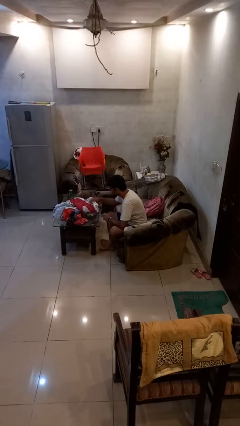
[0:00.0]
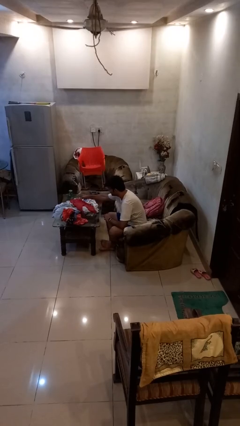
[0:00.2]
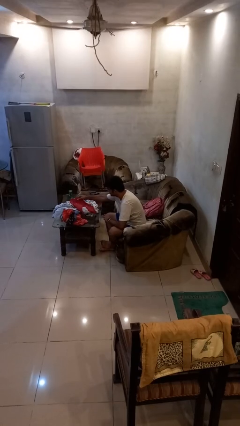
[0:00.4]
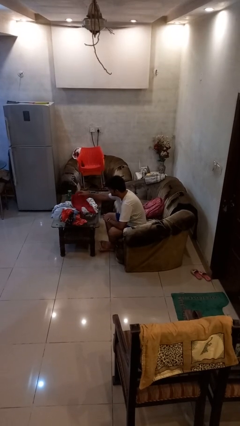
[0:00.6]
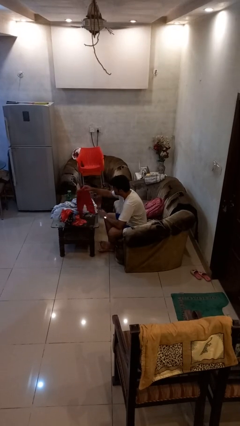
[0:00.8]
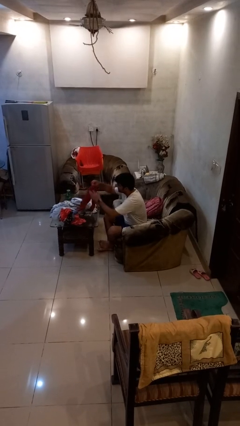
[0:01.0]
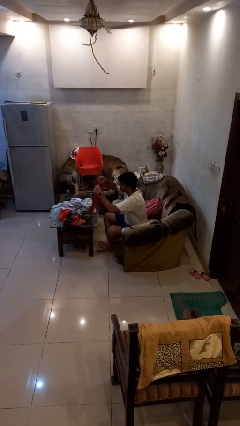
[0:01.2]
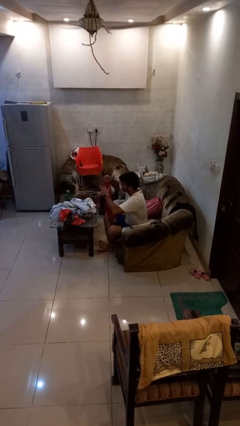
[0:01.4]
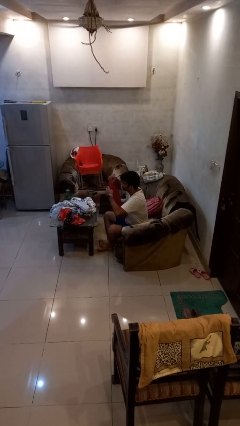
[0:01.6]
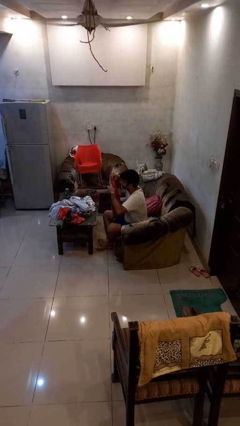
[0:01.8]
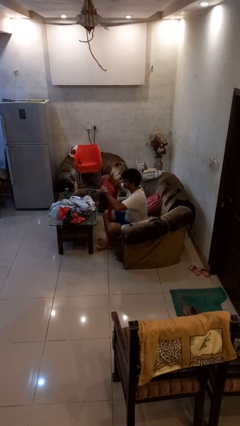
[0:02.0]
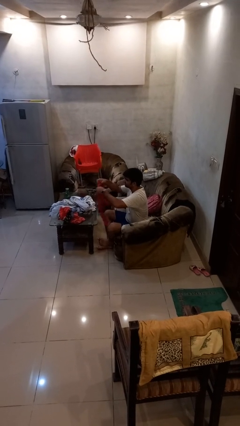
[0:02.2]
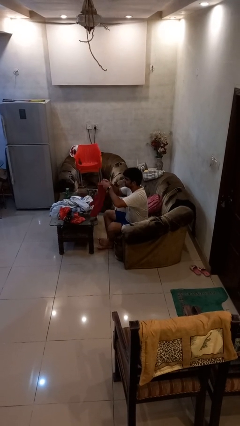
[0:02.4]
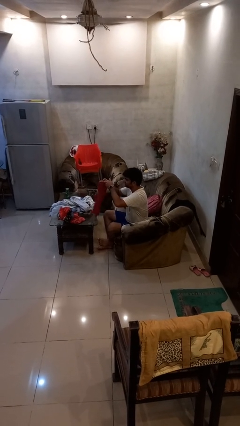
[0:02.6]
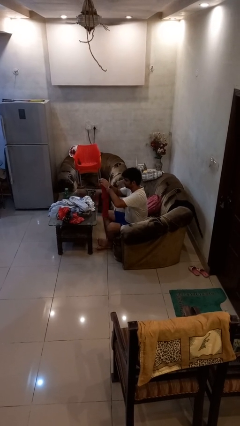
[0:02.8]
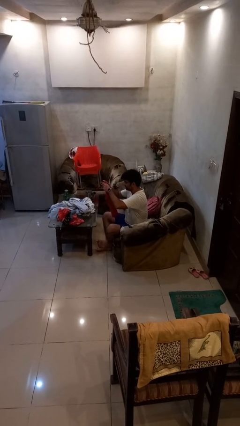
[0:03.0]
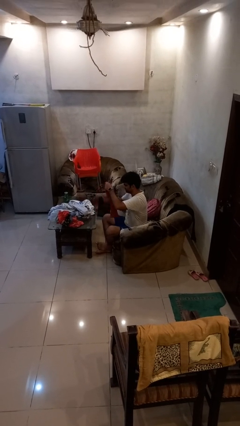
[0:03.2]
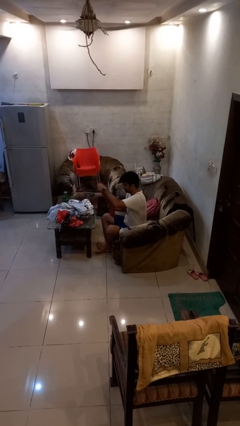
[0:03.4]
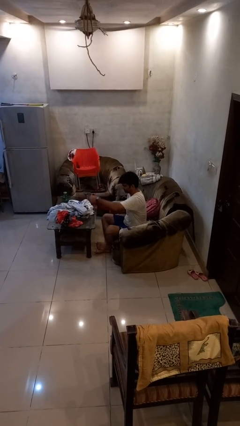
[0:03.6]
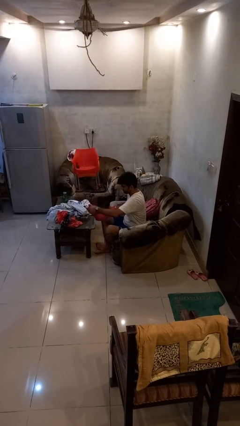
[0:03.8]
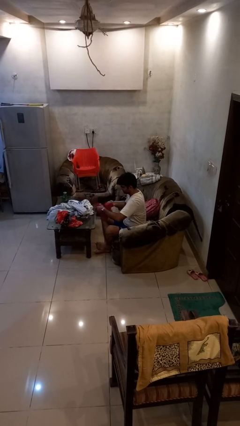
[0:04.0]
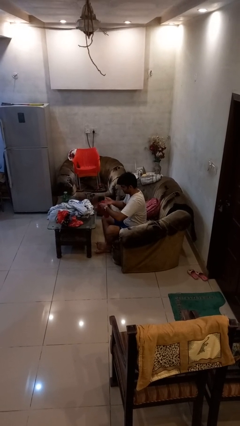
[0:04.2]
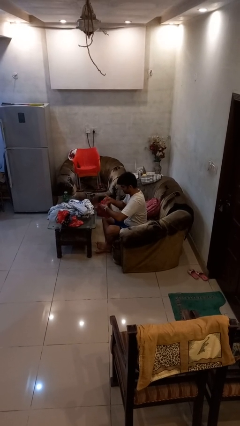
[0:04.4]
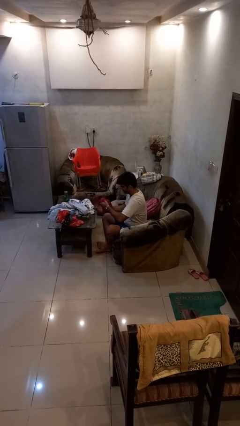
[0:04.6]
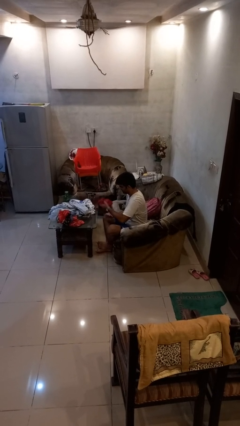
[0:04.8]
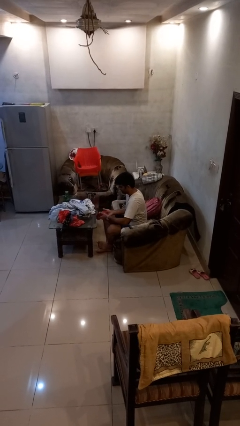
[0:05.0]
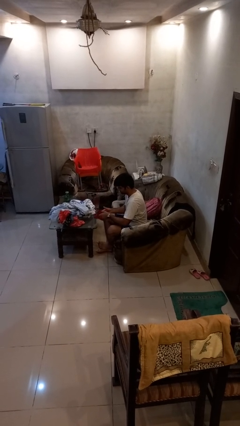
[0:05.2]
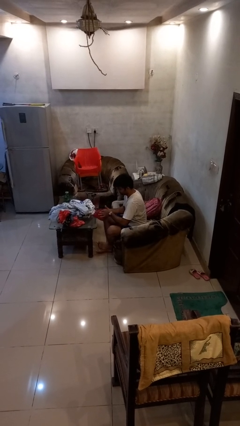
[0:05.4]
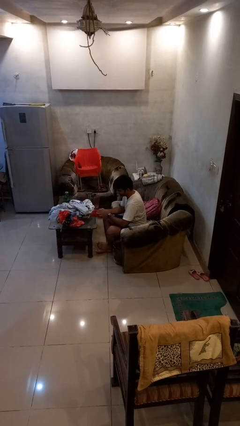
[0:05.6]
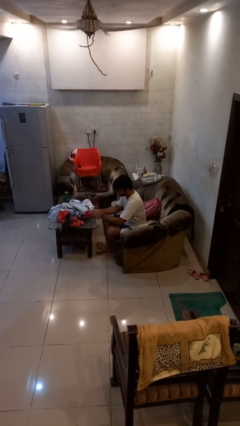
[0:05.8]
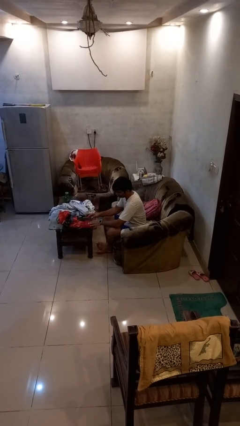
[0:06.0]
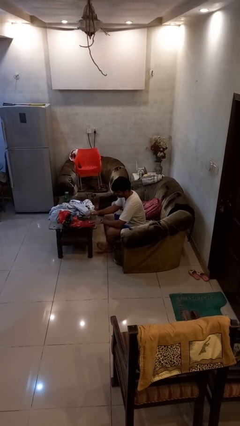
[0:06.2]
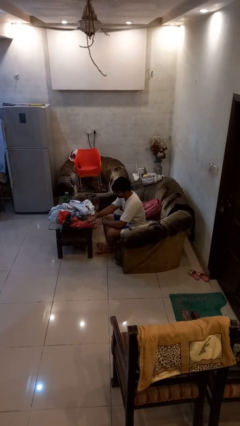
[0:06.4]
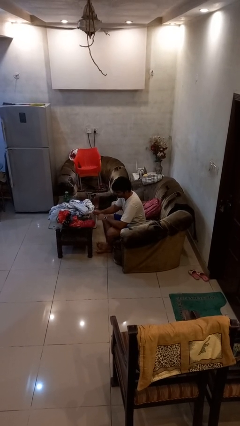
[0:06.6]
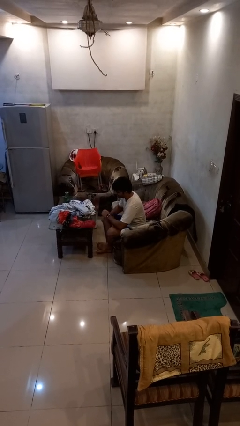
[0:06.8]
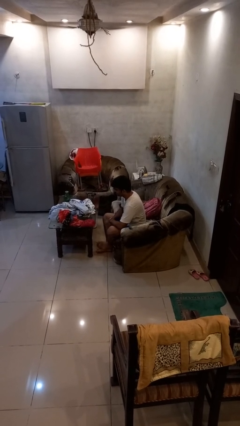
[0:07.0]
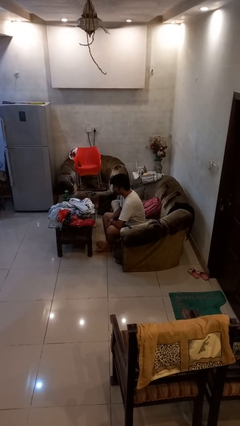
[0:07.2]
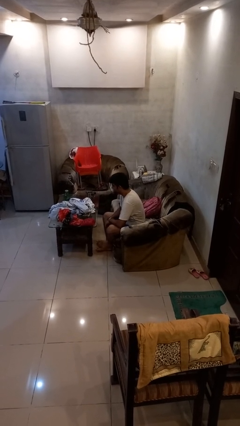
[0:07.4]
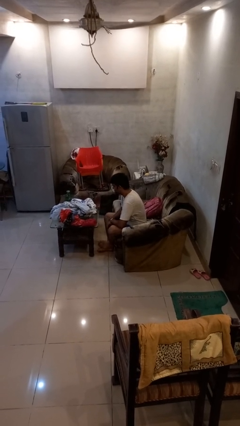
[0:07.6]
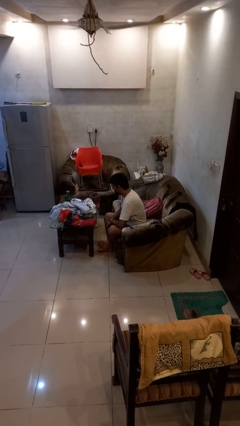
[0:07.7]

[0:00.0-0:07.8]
person folds pants

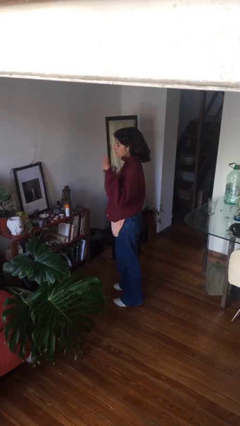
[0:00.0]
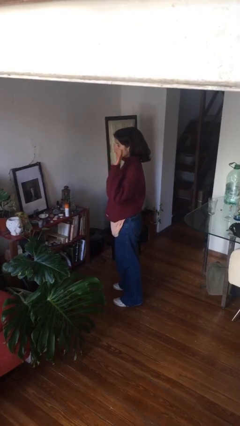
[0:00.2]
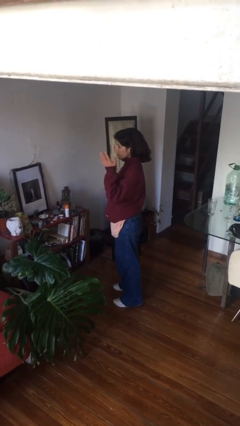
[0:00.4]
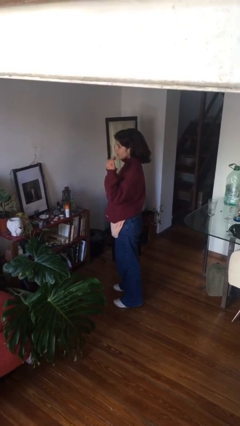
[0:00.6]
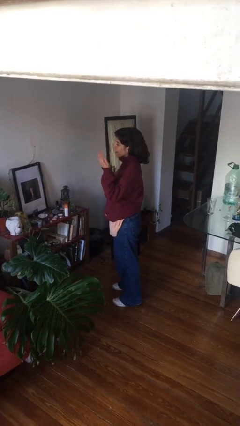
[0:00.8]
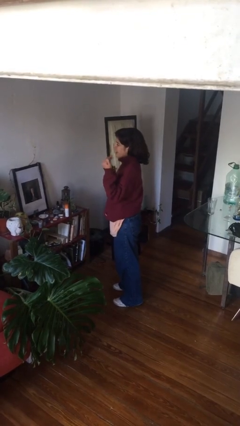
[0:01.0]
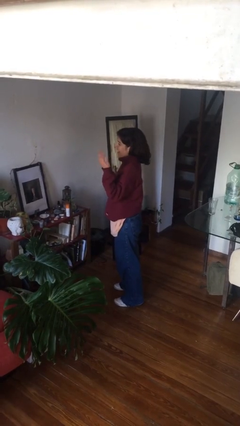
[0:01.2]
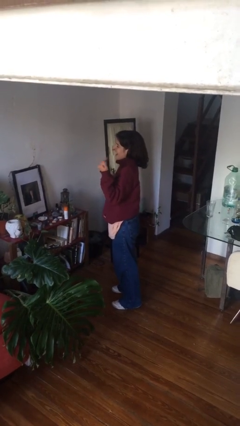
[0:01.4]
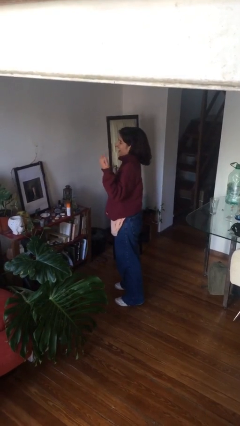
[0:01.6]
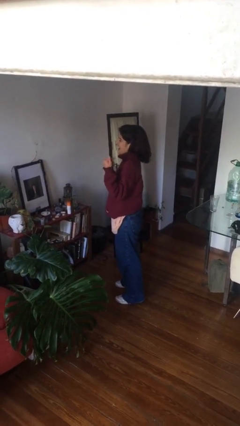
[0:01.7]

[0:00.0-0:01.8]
person gestures come here

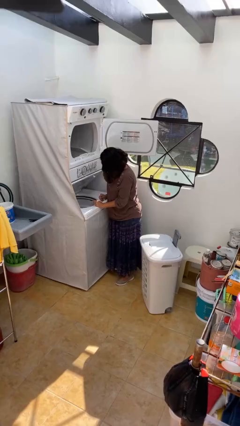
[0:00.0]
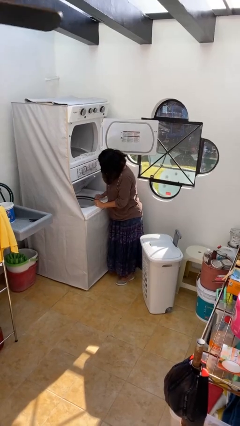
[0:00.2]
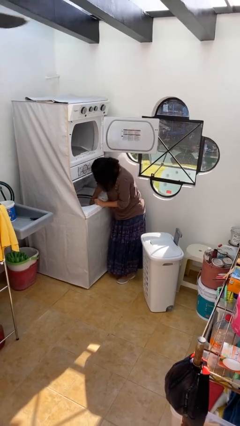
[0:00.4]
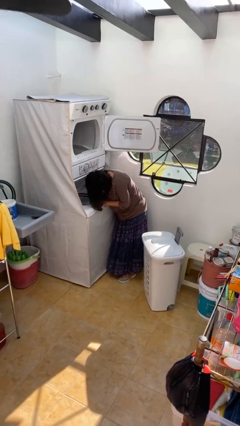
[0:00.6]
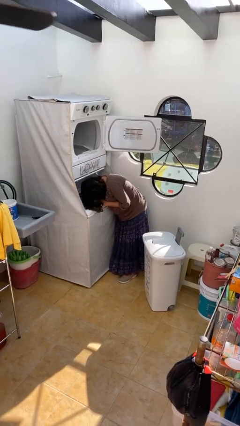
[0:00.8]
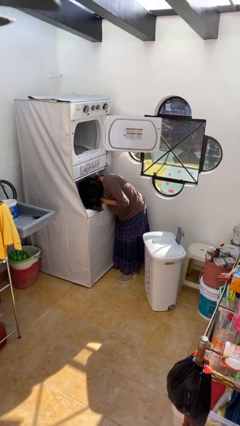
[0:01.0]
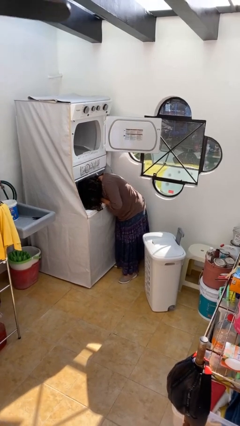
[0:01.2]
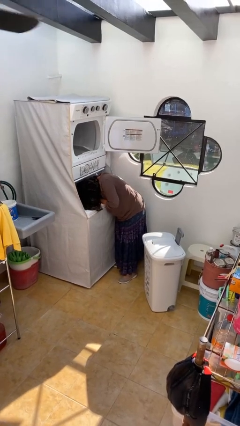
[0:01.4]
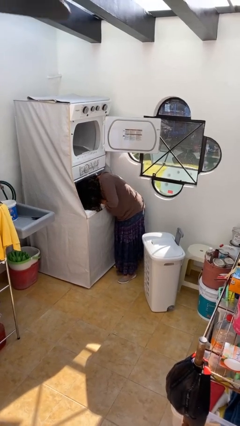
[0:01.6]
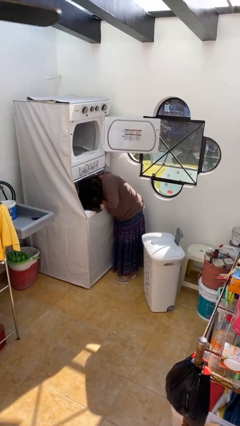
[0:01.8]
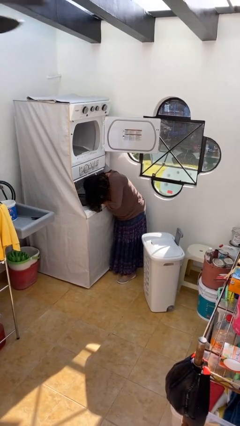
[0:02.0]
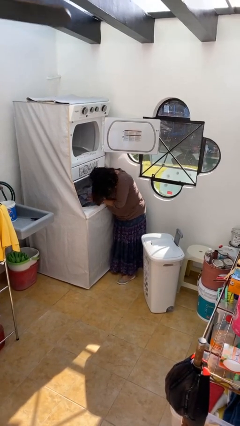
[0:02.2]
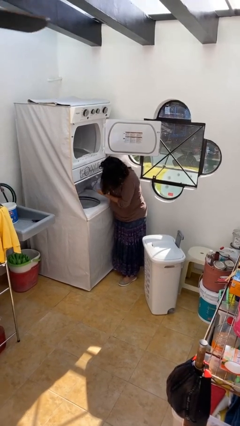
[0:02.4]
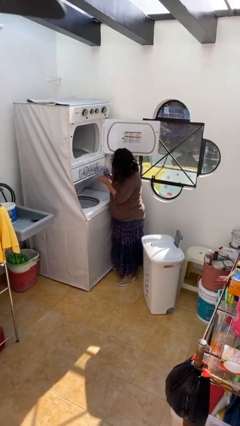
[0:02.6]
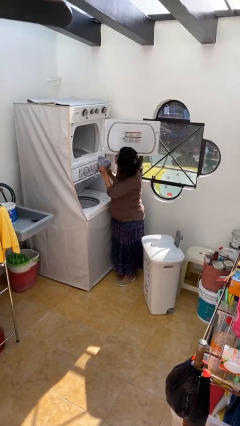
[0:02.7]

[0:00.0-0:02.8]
person unloads clotheswasher

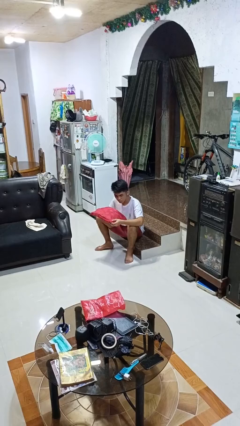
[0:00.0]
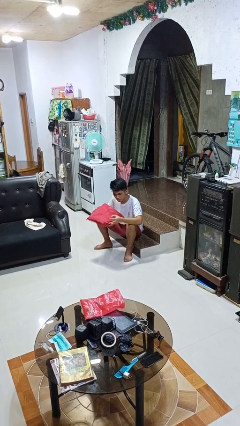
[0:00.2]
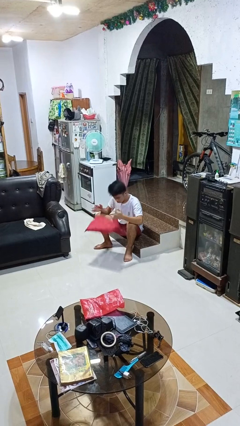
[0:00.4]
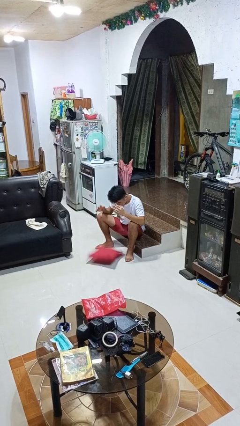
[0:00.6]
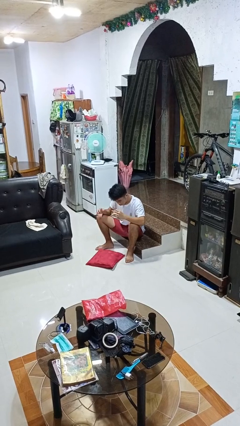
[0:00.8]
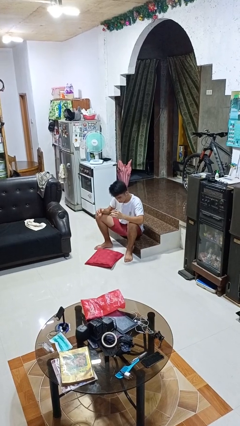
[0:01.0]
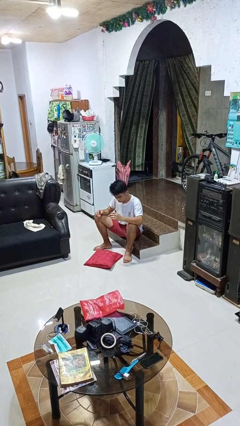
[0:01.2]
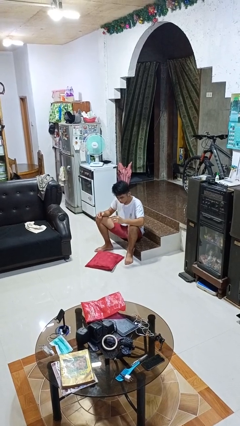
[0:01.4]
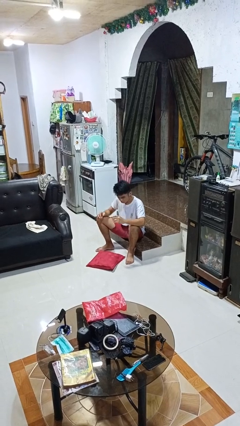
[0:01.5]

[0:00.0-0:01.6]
person drops object

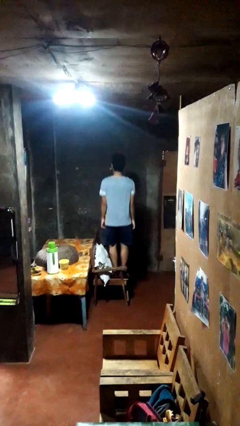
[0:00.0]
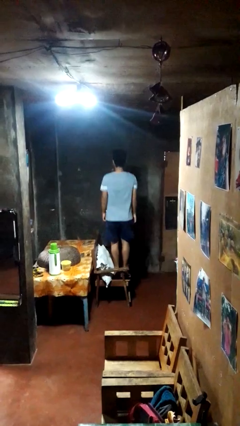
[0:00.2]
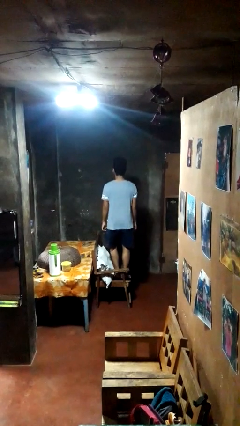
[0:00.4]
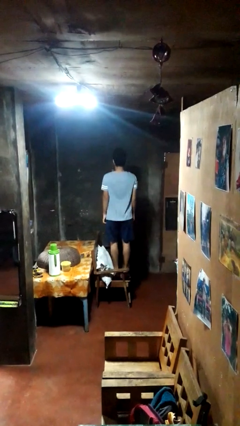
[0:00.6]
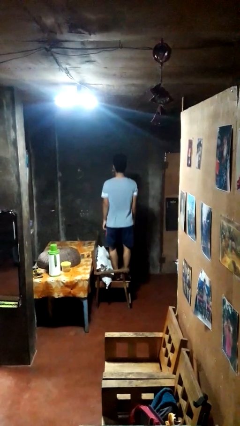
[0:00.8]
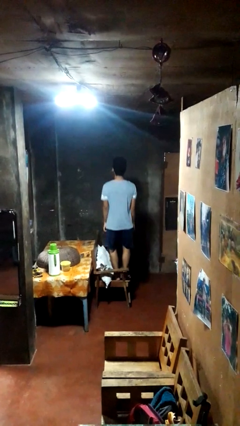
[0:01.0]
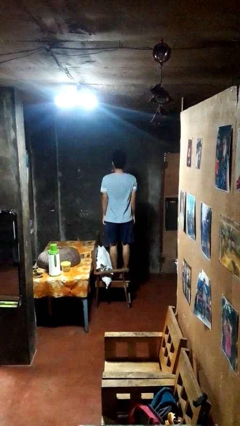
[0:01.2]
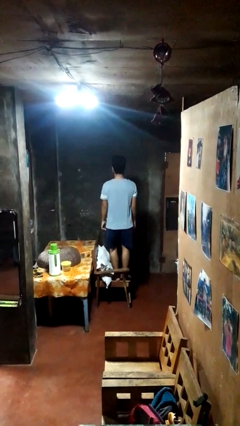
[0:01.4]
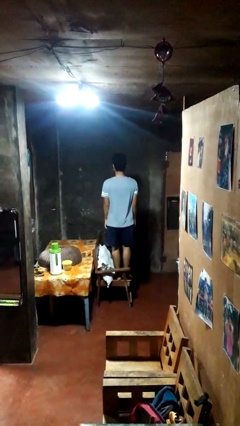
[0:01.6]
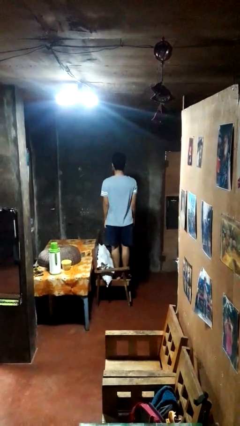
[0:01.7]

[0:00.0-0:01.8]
person jumps on couch

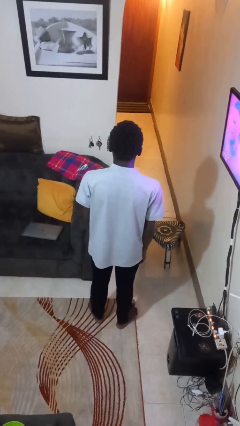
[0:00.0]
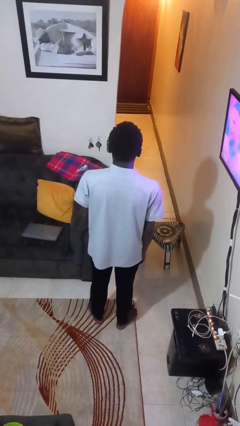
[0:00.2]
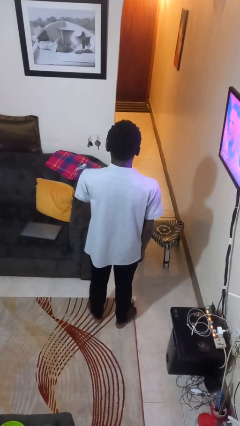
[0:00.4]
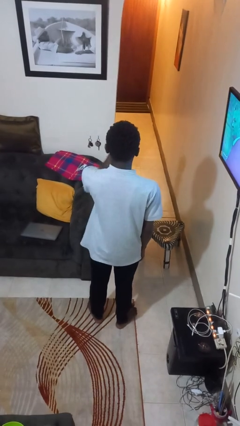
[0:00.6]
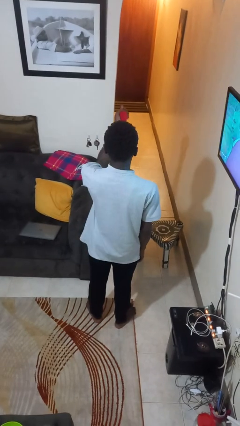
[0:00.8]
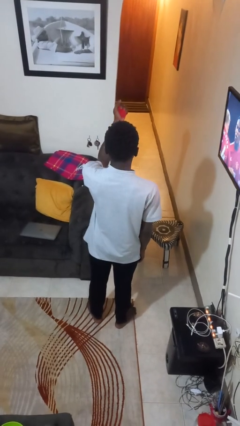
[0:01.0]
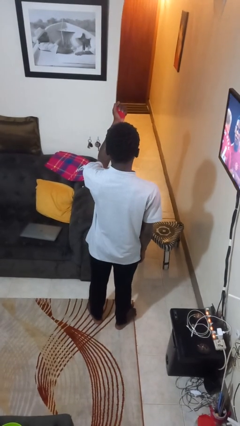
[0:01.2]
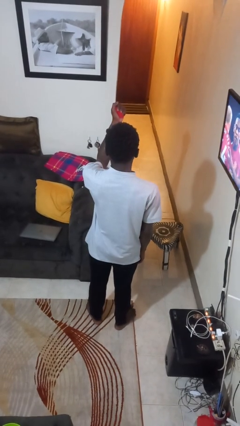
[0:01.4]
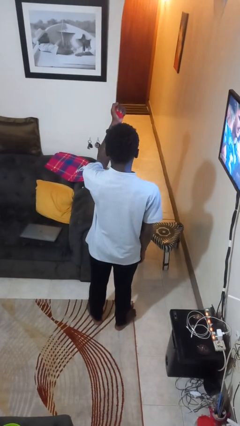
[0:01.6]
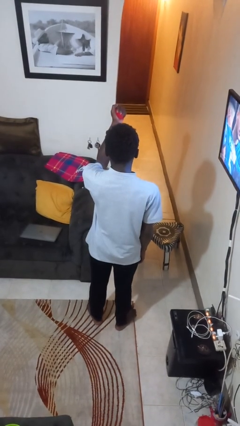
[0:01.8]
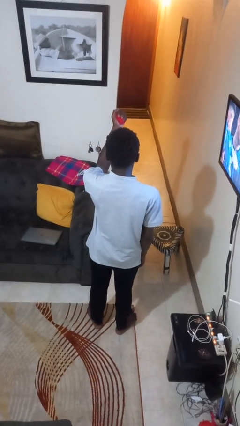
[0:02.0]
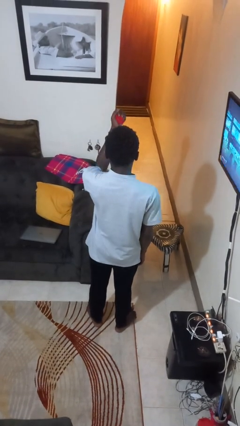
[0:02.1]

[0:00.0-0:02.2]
person squeezes object
